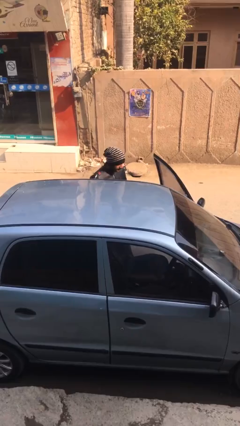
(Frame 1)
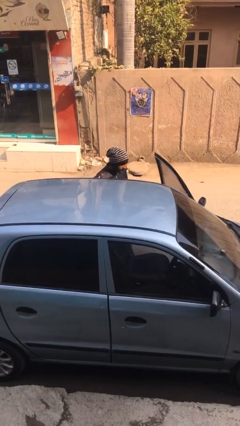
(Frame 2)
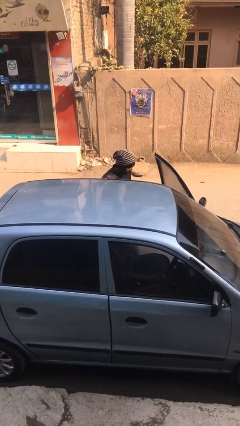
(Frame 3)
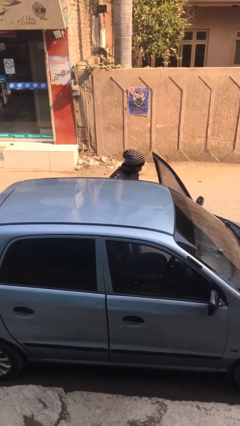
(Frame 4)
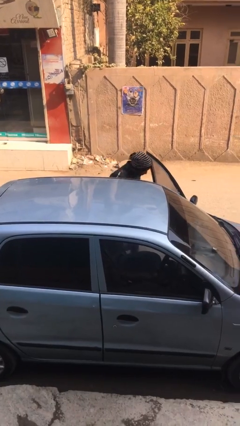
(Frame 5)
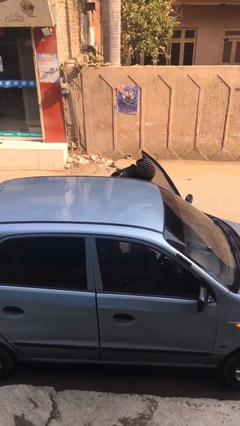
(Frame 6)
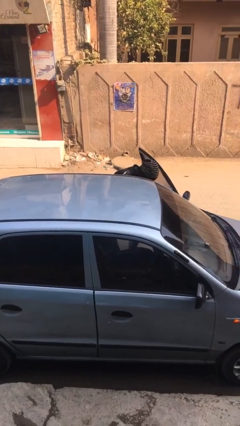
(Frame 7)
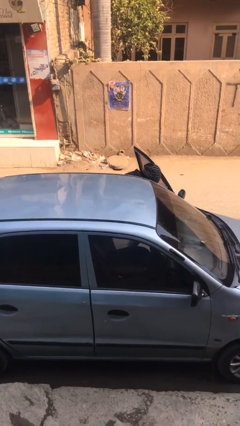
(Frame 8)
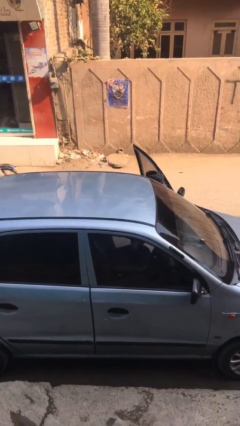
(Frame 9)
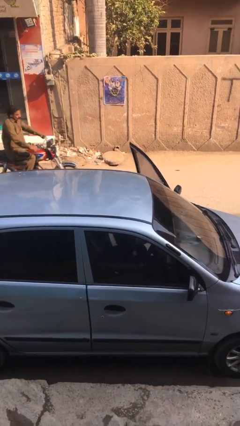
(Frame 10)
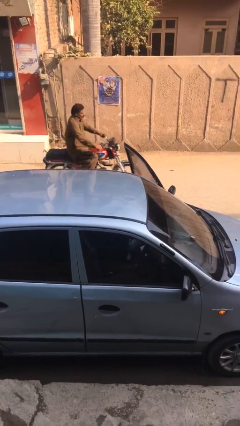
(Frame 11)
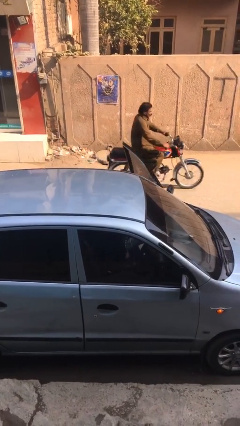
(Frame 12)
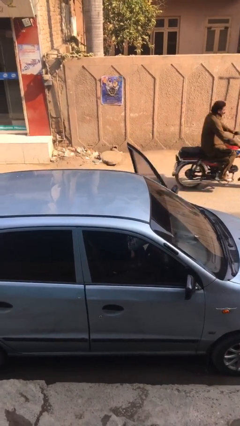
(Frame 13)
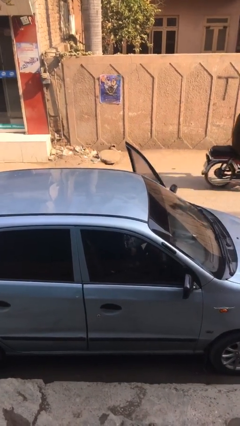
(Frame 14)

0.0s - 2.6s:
person enters car

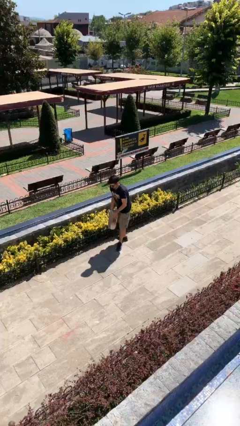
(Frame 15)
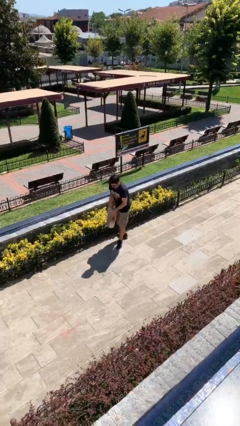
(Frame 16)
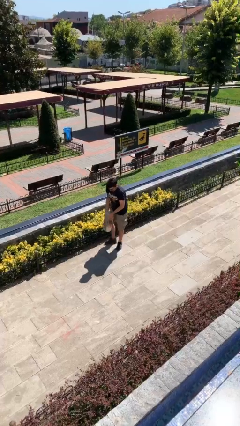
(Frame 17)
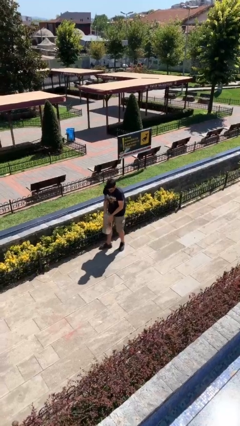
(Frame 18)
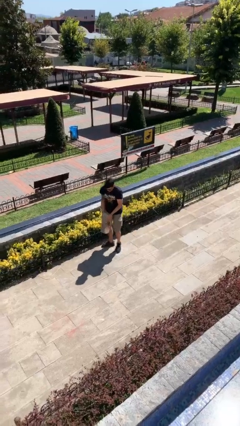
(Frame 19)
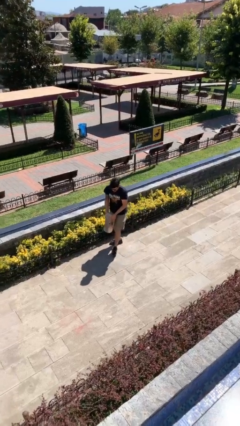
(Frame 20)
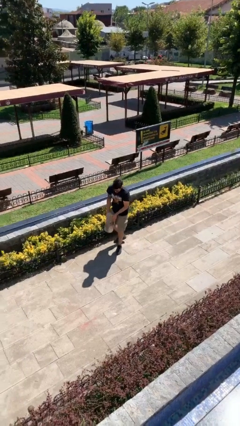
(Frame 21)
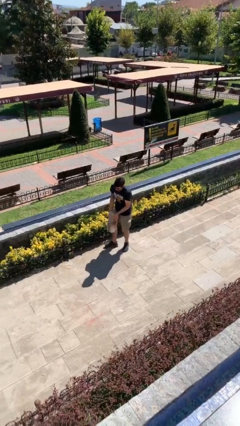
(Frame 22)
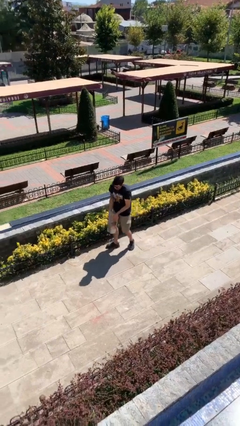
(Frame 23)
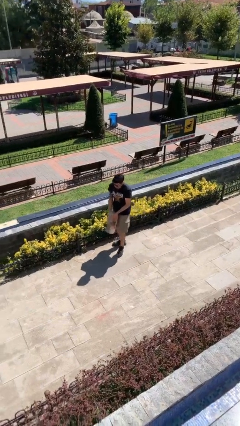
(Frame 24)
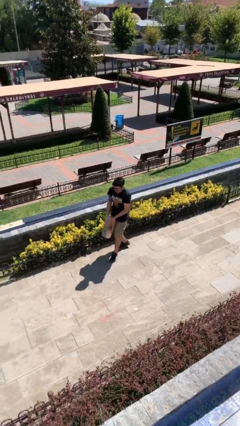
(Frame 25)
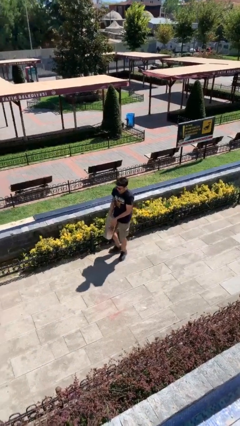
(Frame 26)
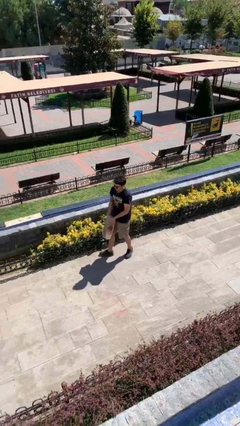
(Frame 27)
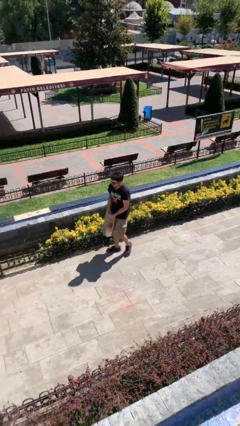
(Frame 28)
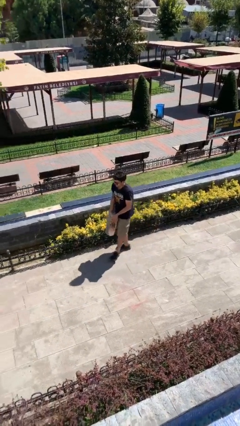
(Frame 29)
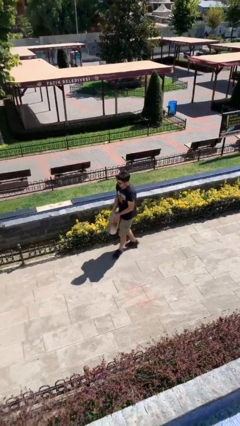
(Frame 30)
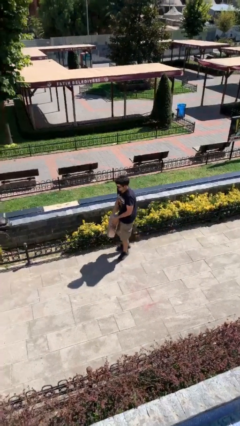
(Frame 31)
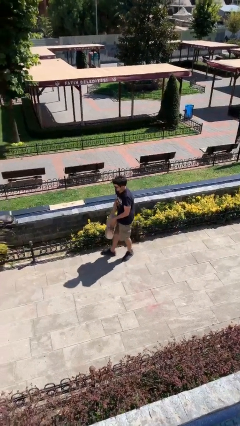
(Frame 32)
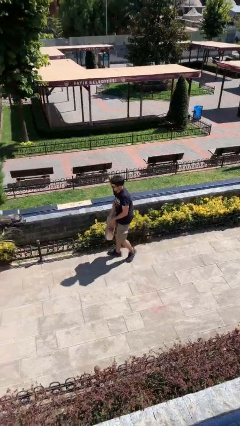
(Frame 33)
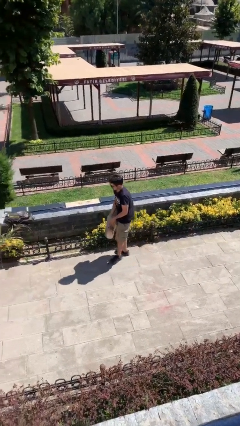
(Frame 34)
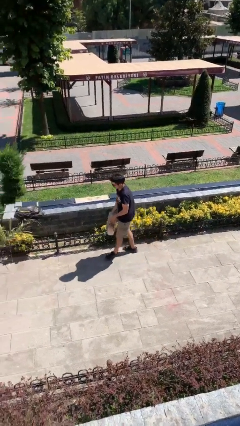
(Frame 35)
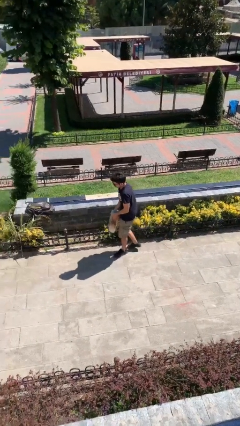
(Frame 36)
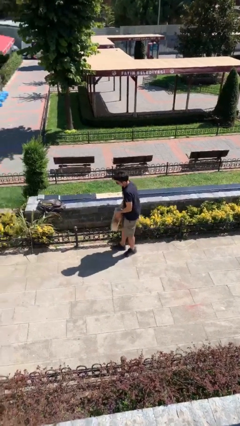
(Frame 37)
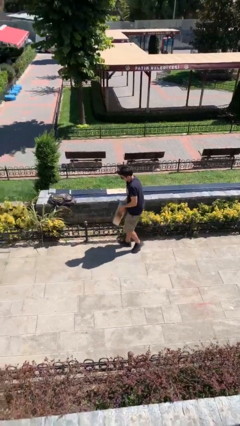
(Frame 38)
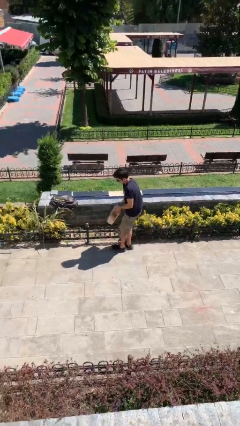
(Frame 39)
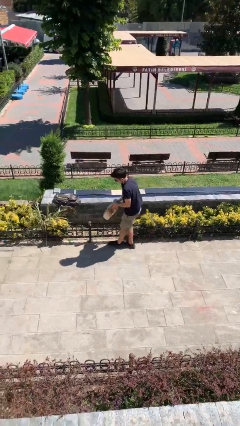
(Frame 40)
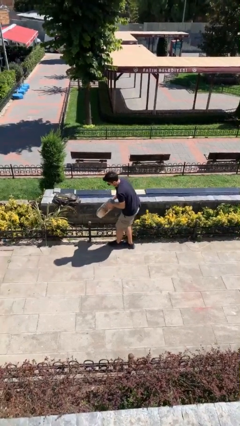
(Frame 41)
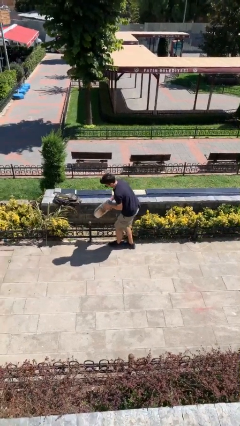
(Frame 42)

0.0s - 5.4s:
person carries heavy object

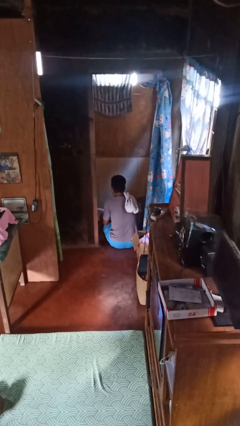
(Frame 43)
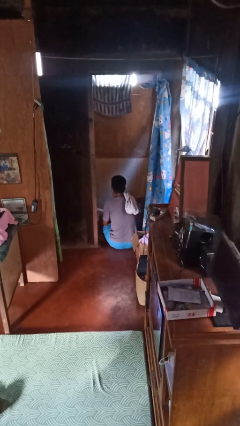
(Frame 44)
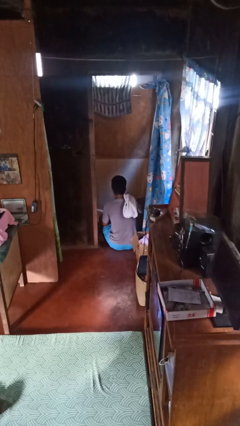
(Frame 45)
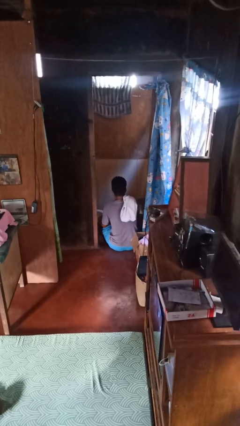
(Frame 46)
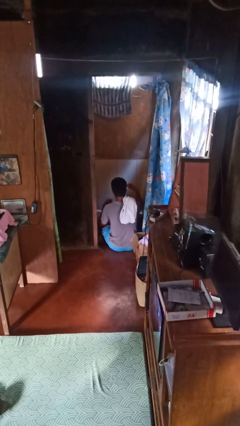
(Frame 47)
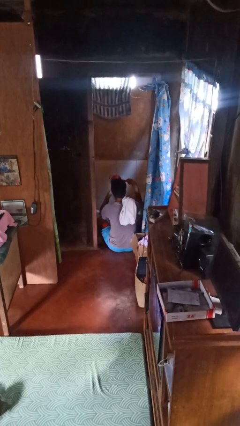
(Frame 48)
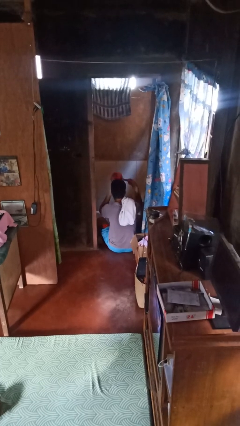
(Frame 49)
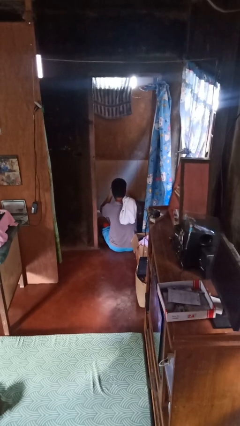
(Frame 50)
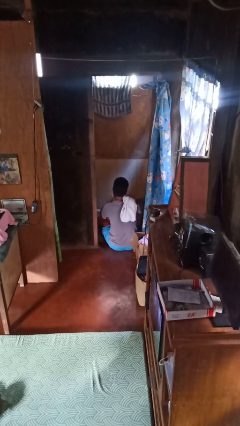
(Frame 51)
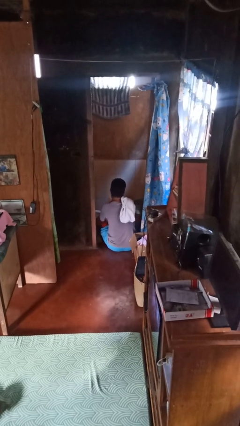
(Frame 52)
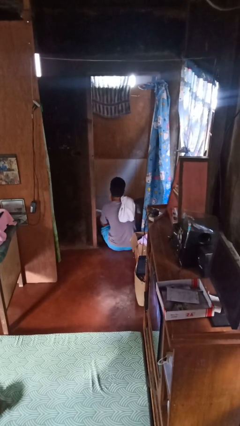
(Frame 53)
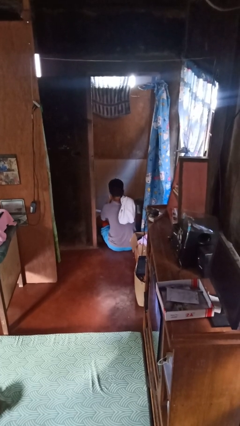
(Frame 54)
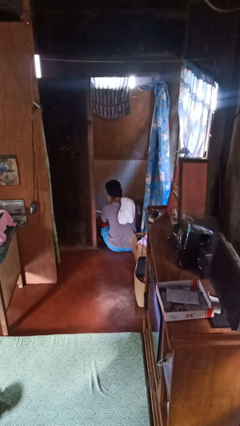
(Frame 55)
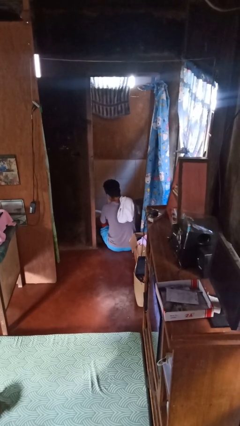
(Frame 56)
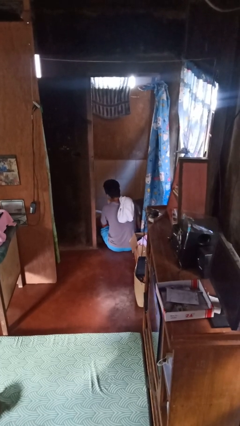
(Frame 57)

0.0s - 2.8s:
person washes face

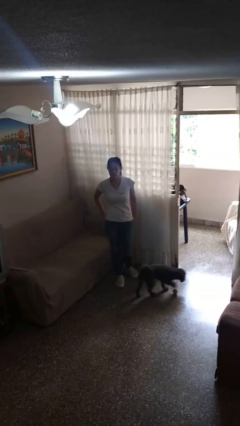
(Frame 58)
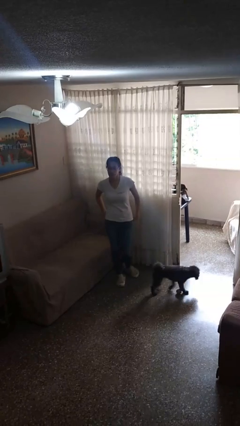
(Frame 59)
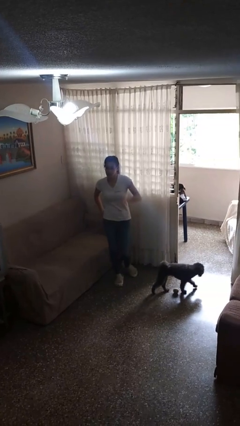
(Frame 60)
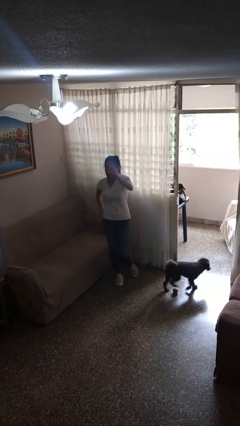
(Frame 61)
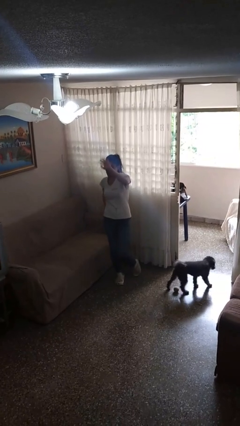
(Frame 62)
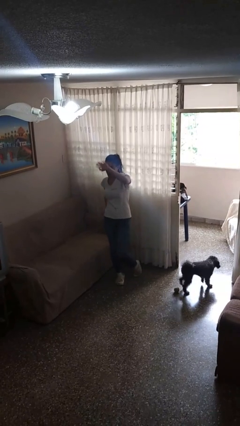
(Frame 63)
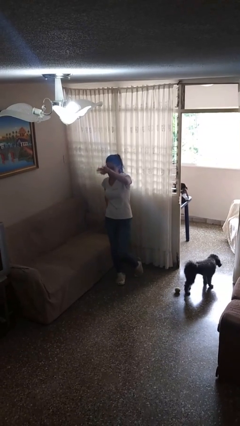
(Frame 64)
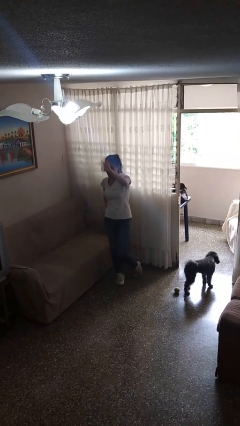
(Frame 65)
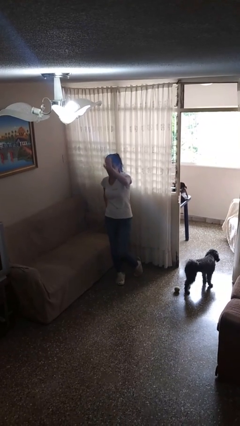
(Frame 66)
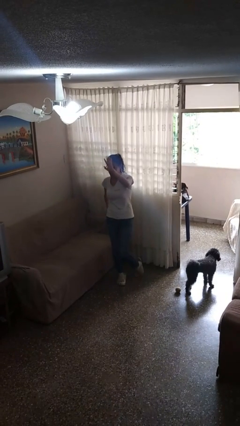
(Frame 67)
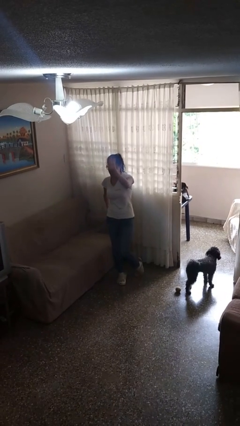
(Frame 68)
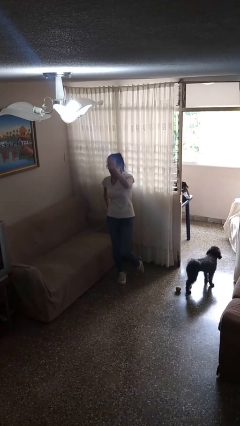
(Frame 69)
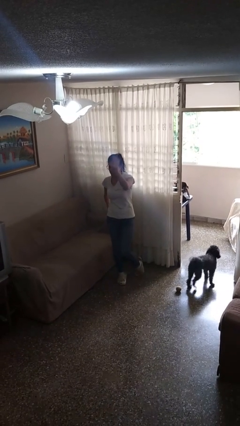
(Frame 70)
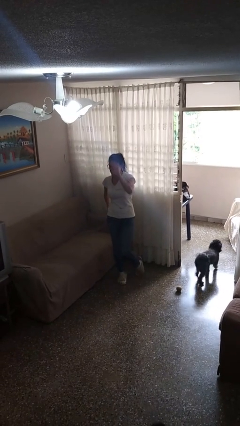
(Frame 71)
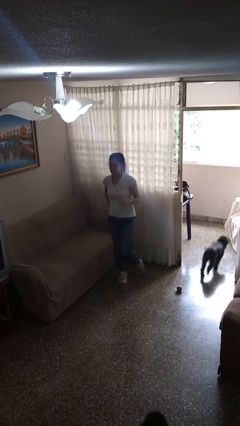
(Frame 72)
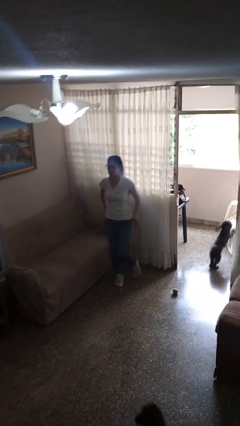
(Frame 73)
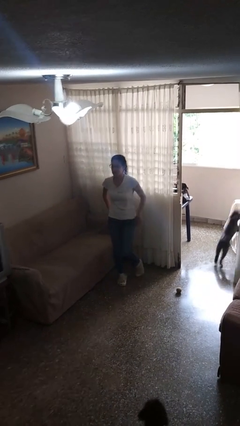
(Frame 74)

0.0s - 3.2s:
person waves at person

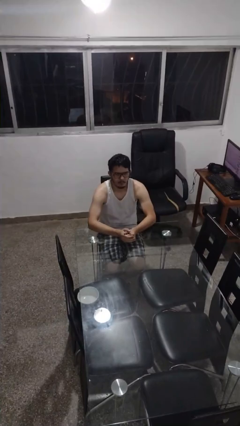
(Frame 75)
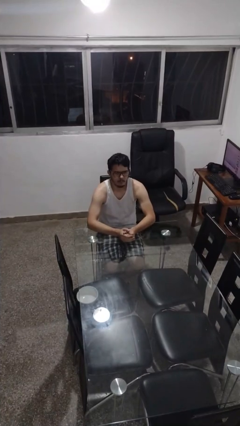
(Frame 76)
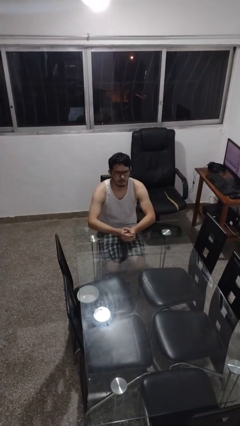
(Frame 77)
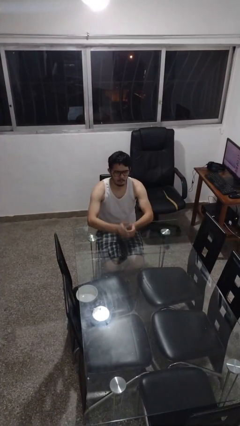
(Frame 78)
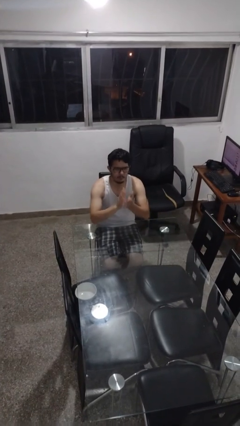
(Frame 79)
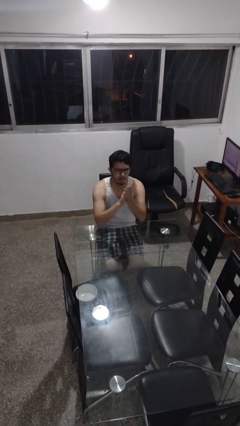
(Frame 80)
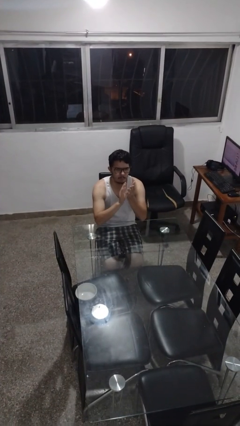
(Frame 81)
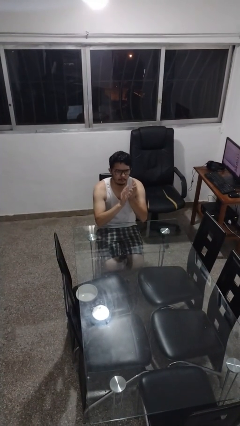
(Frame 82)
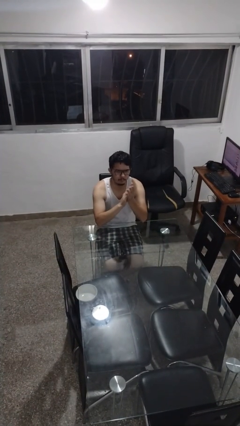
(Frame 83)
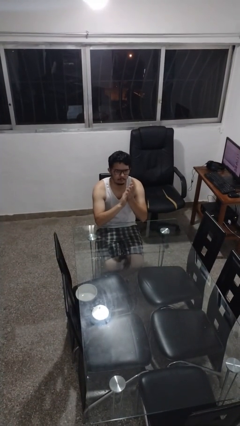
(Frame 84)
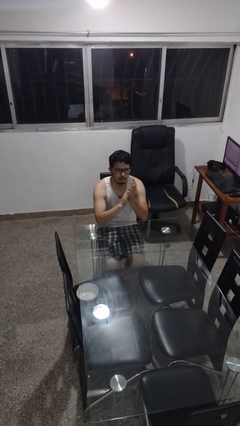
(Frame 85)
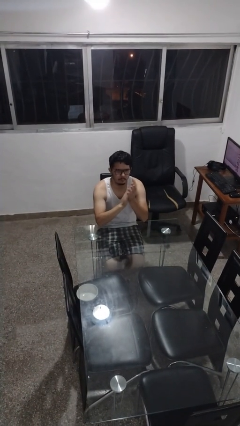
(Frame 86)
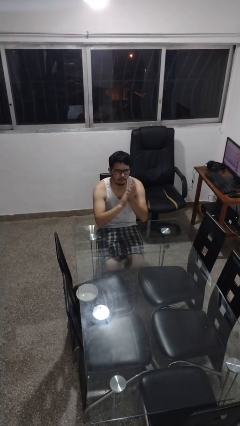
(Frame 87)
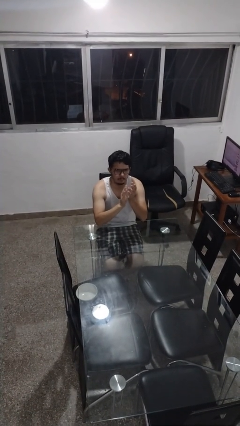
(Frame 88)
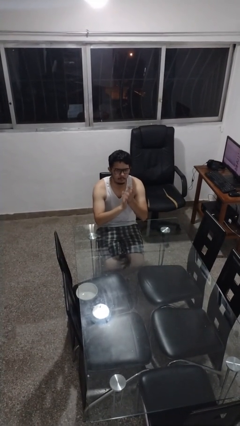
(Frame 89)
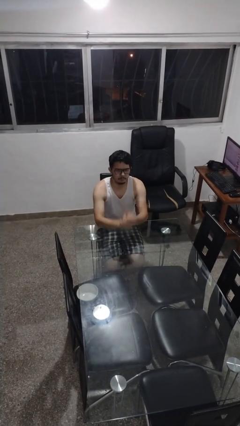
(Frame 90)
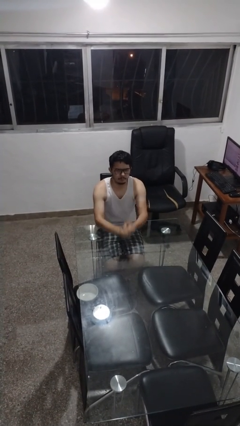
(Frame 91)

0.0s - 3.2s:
person claps hands

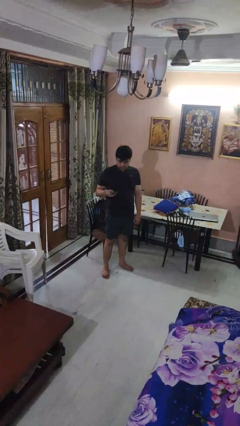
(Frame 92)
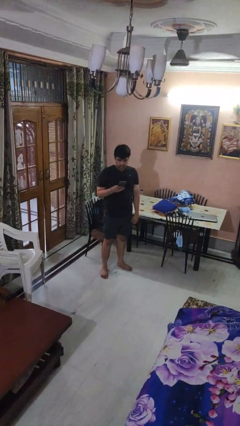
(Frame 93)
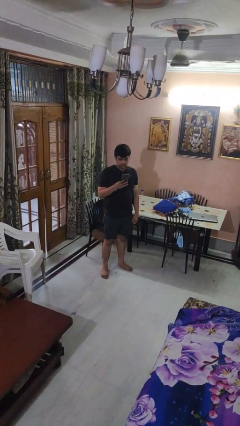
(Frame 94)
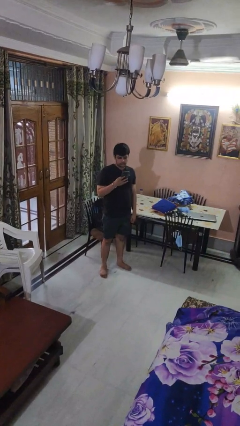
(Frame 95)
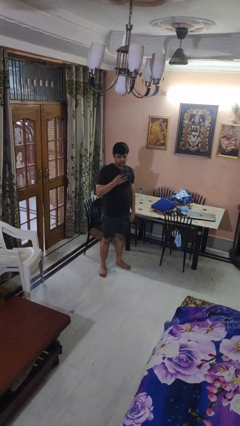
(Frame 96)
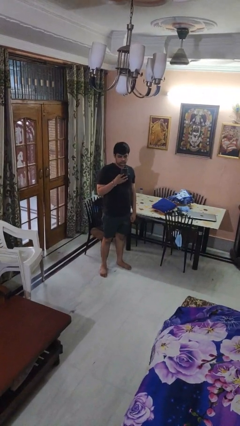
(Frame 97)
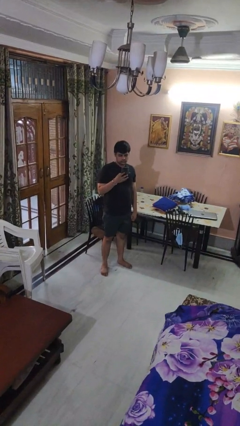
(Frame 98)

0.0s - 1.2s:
person takes phone from pocket
